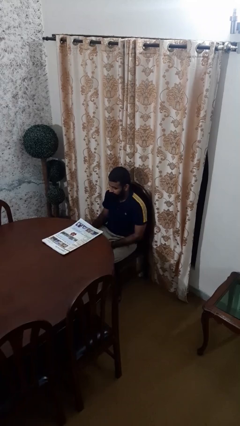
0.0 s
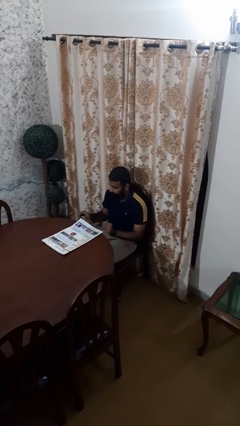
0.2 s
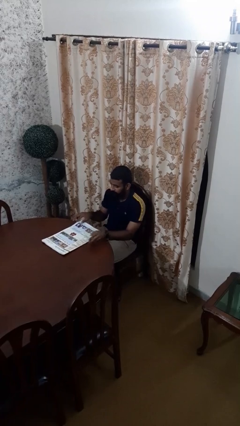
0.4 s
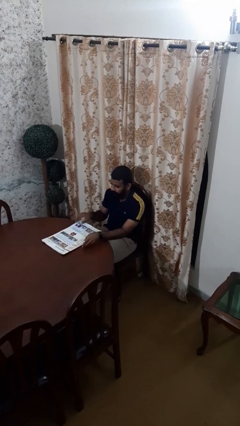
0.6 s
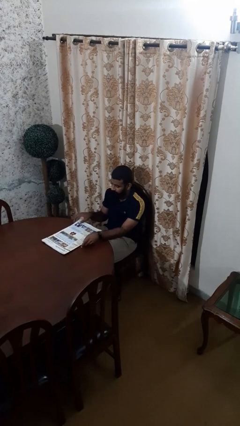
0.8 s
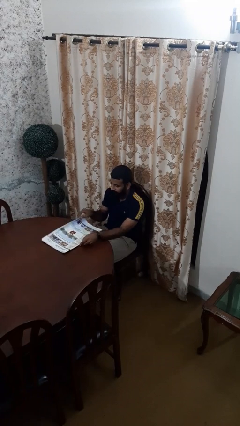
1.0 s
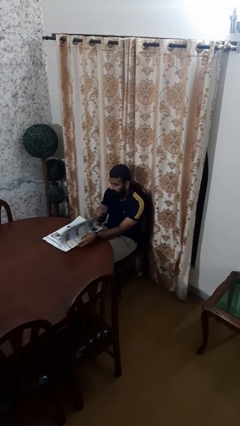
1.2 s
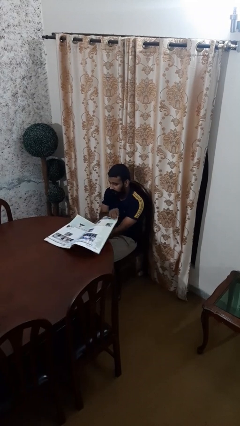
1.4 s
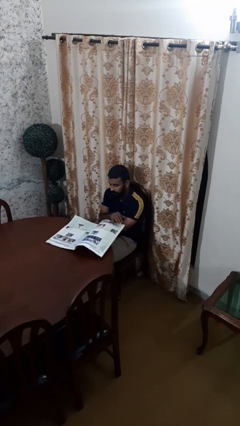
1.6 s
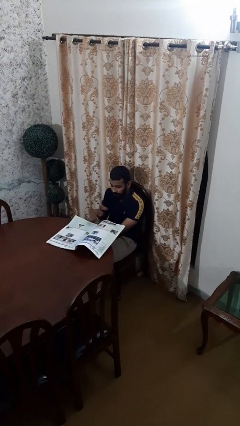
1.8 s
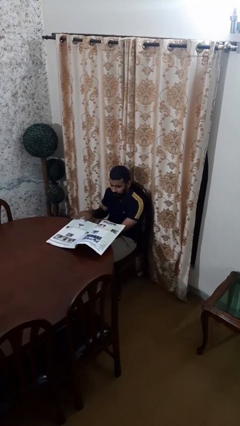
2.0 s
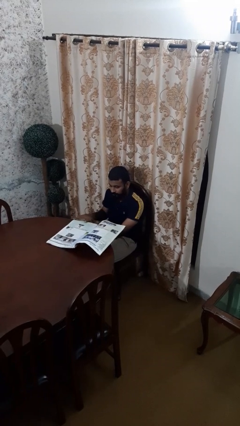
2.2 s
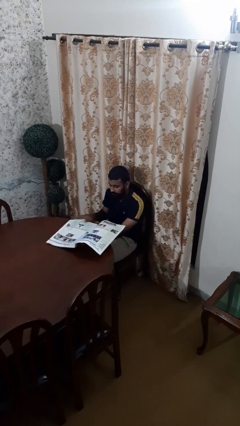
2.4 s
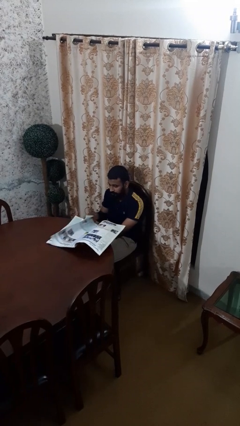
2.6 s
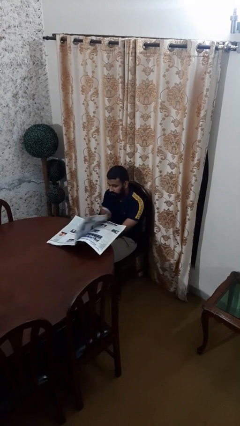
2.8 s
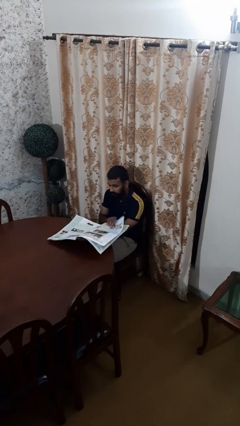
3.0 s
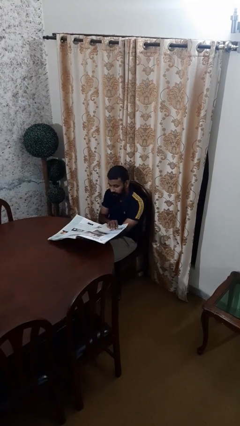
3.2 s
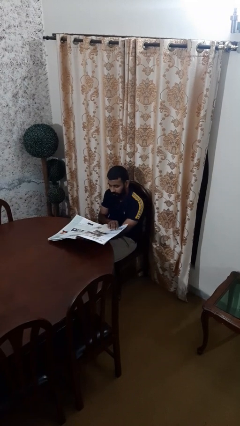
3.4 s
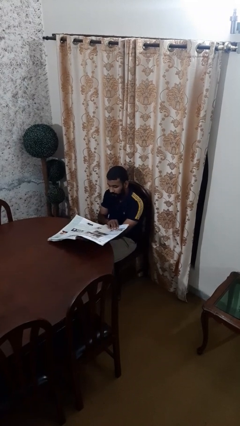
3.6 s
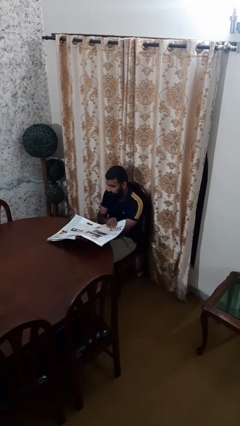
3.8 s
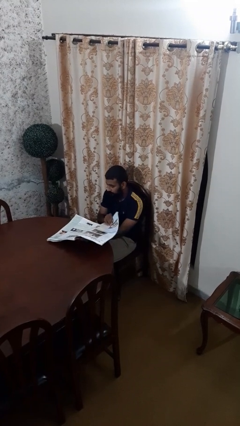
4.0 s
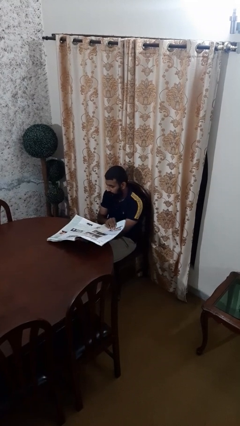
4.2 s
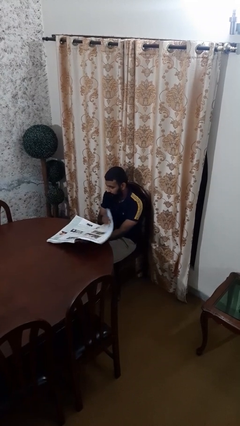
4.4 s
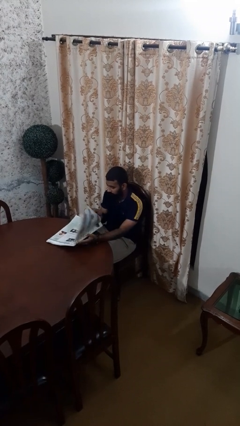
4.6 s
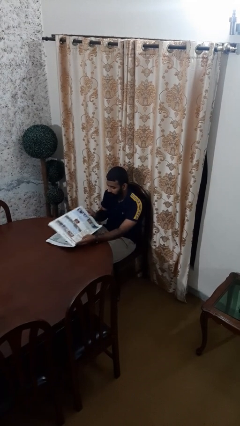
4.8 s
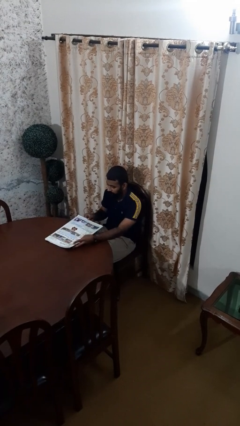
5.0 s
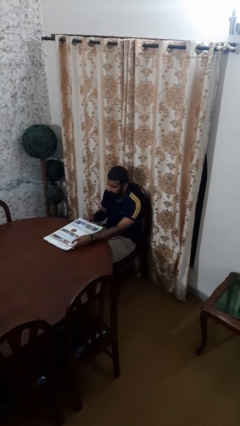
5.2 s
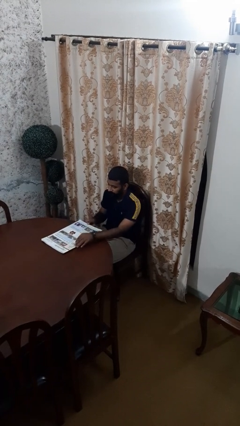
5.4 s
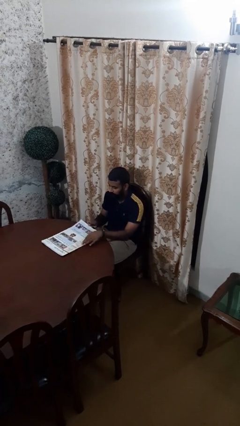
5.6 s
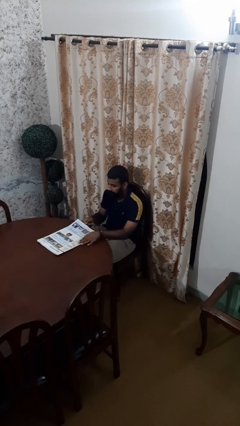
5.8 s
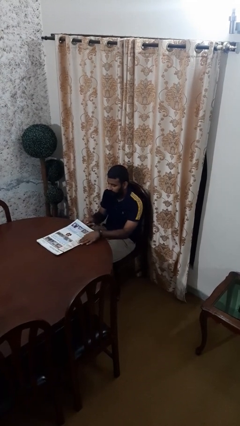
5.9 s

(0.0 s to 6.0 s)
person reads magazine

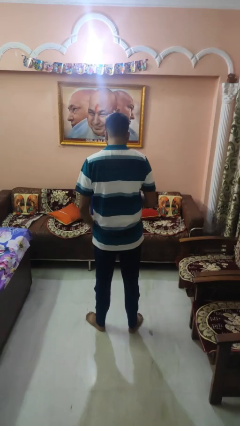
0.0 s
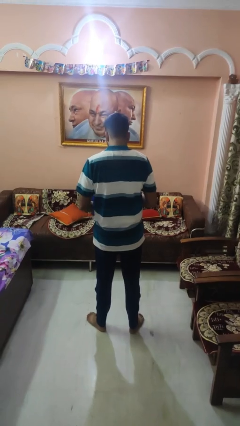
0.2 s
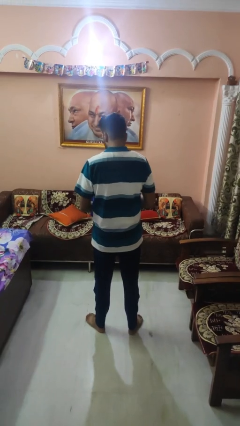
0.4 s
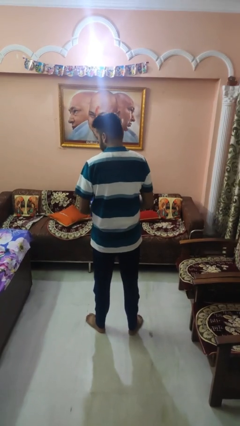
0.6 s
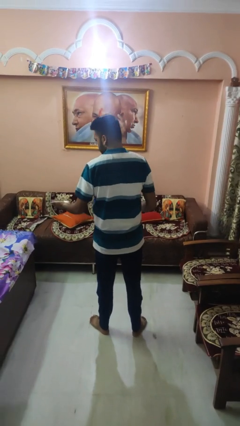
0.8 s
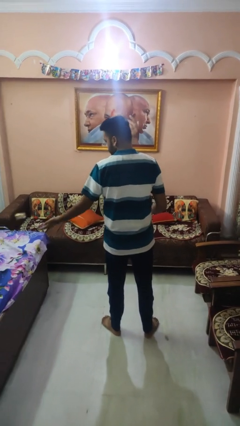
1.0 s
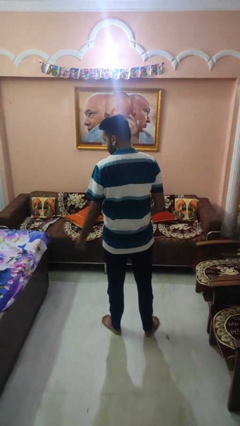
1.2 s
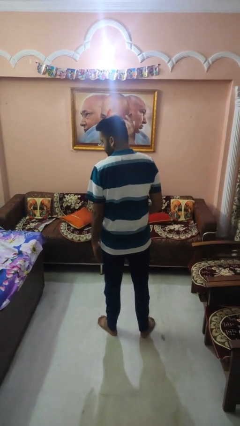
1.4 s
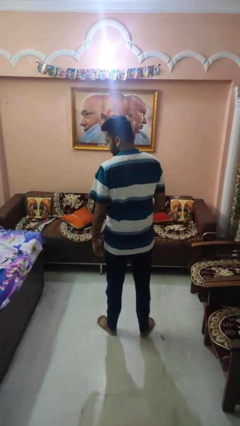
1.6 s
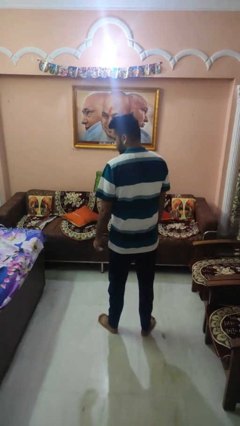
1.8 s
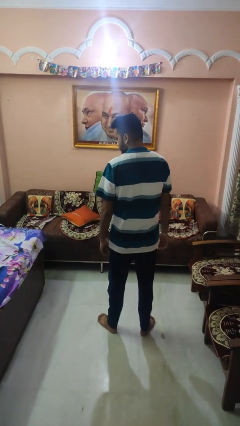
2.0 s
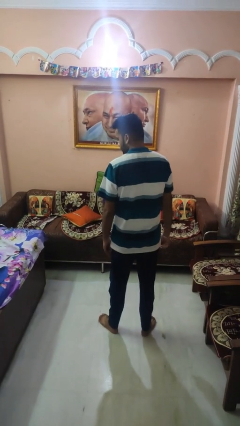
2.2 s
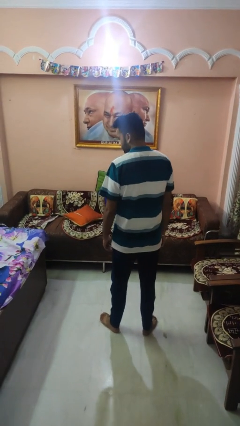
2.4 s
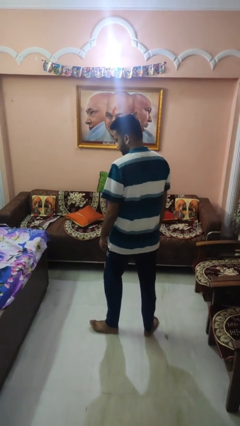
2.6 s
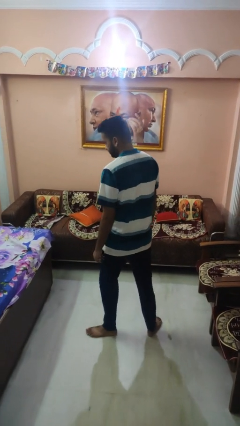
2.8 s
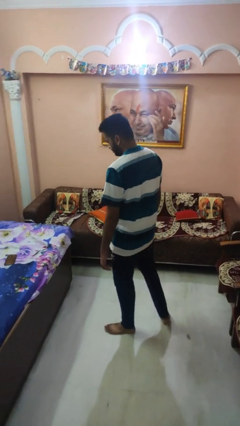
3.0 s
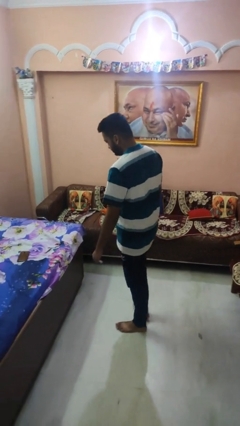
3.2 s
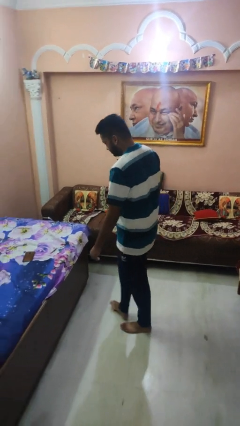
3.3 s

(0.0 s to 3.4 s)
person throws object on bed

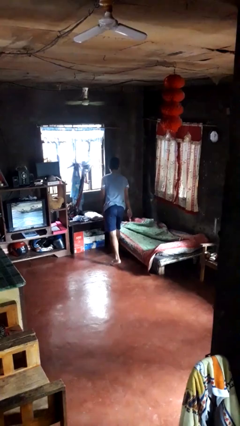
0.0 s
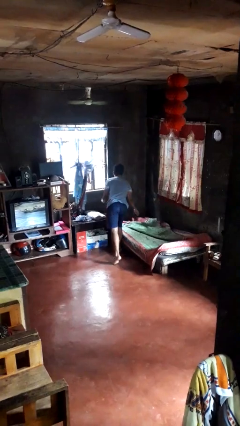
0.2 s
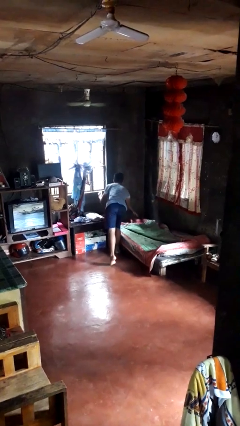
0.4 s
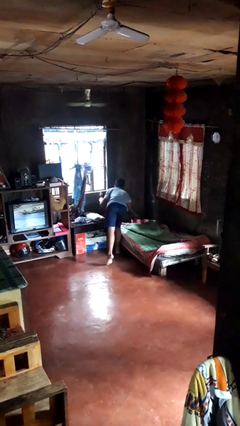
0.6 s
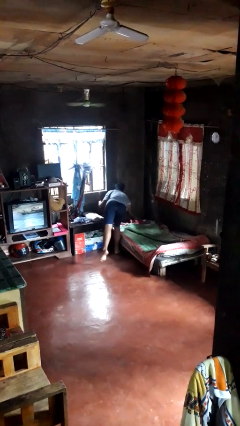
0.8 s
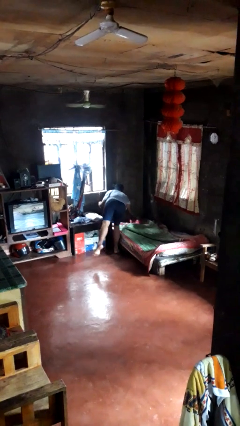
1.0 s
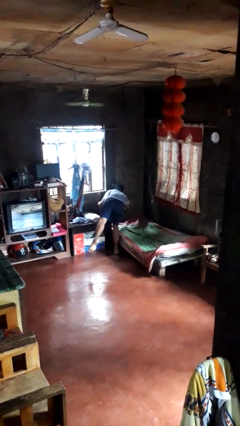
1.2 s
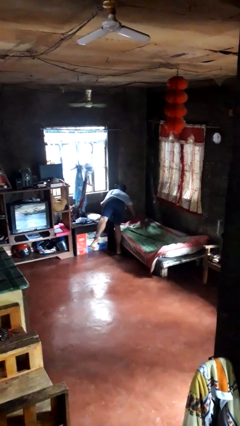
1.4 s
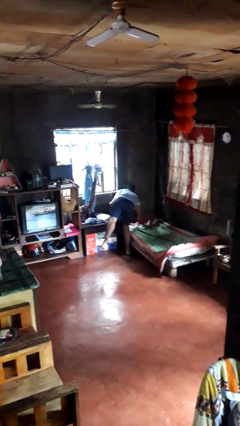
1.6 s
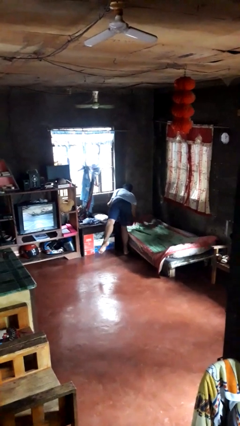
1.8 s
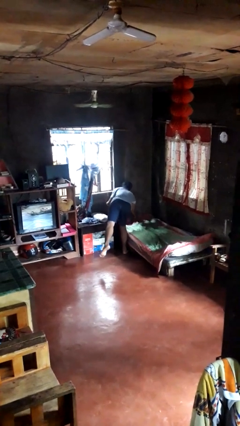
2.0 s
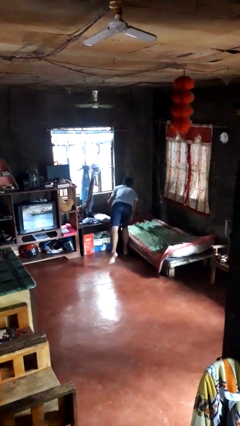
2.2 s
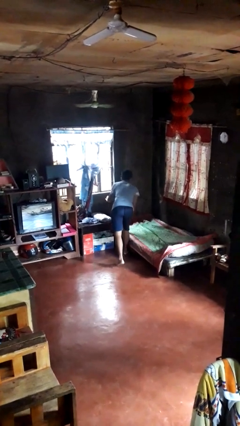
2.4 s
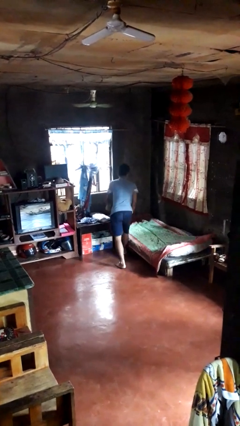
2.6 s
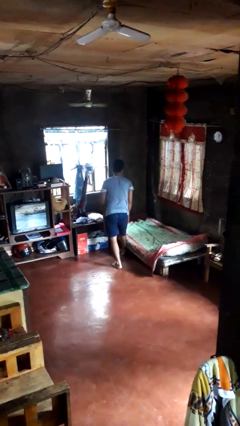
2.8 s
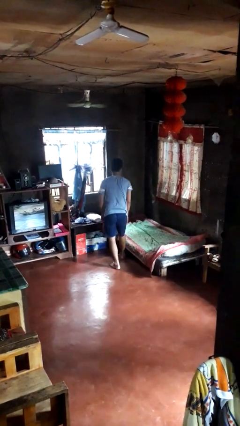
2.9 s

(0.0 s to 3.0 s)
person makes bed

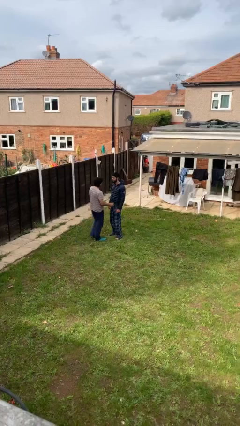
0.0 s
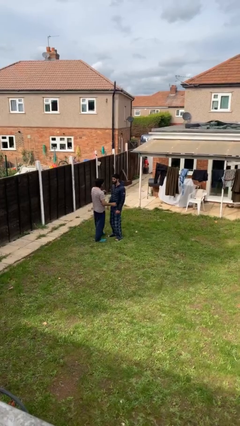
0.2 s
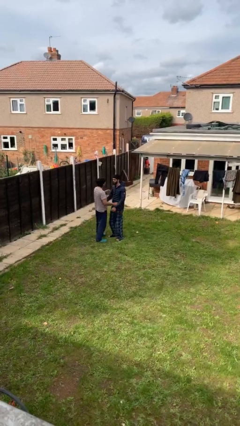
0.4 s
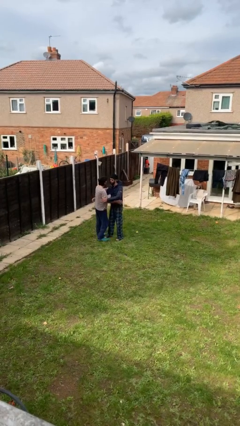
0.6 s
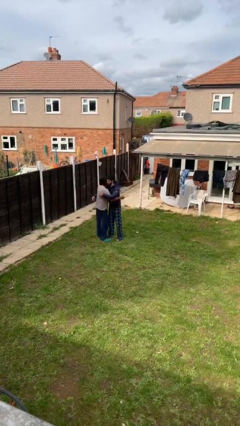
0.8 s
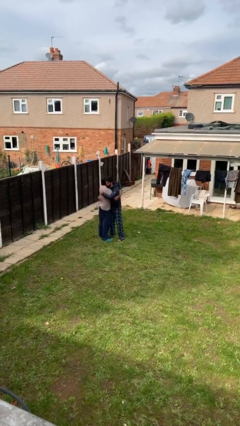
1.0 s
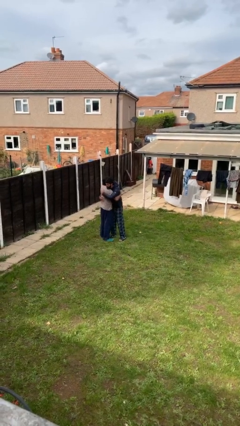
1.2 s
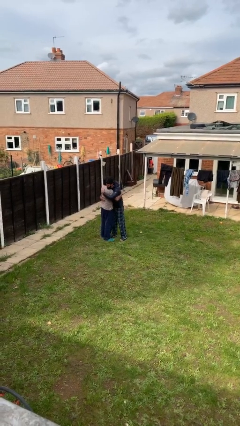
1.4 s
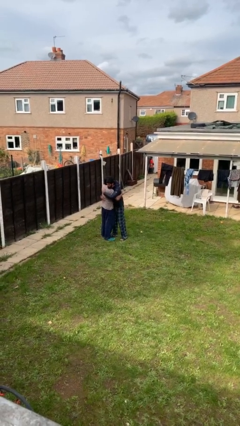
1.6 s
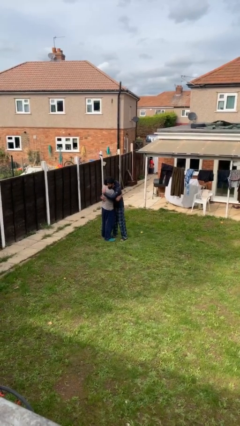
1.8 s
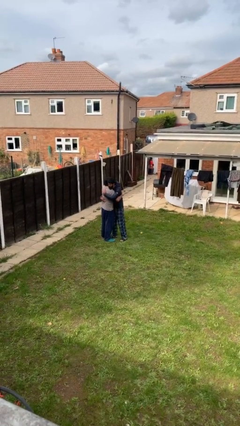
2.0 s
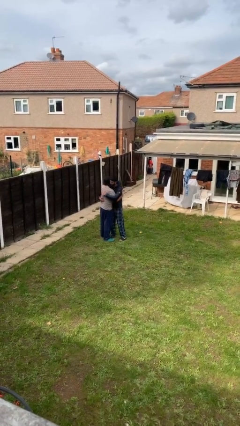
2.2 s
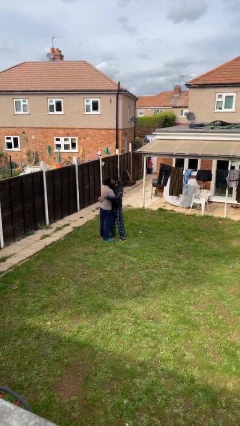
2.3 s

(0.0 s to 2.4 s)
person embraces person

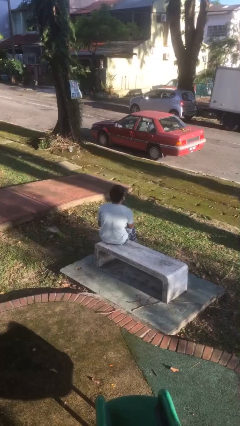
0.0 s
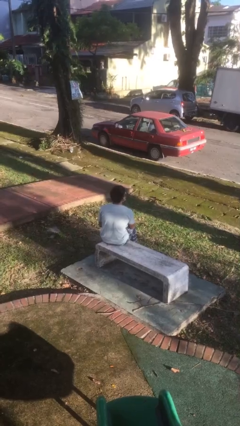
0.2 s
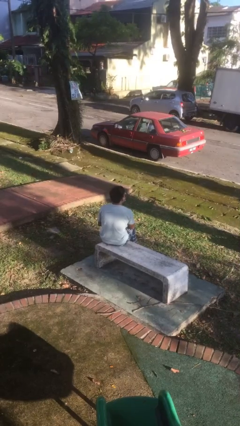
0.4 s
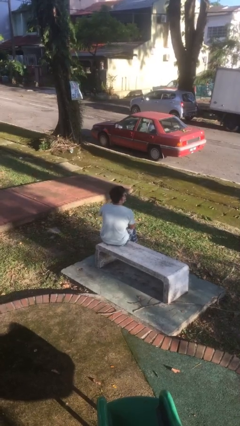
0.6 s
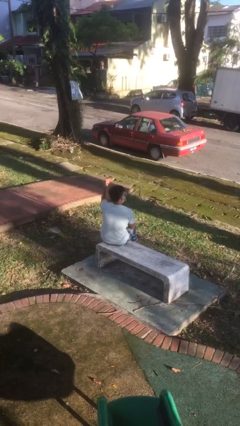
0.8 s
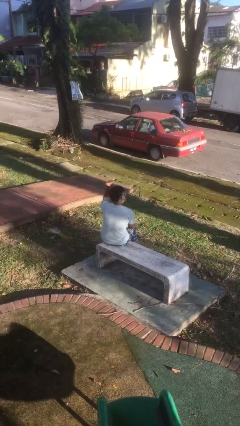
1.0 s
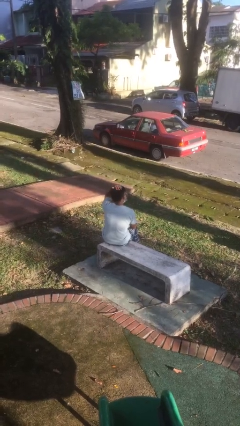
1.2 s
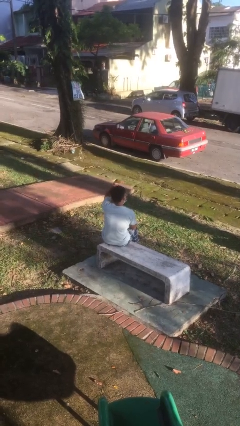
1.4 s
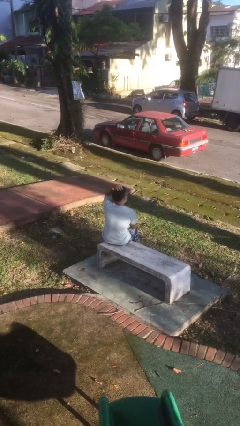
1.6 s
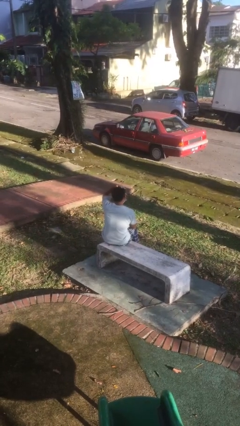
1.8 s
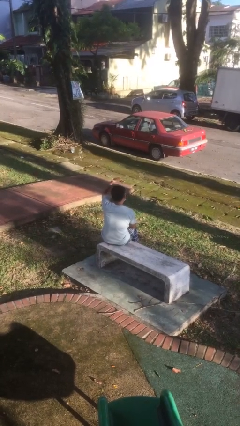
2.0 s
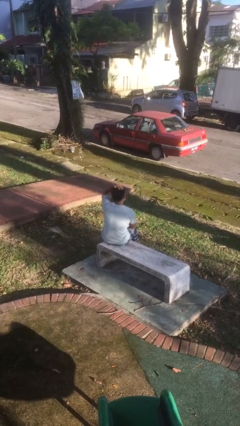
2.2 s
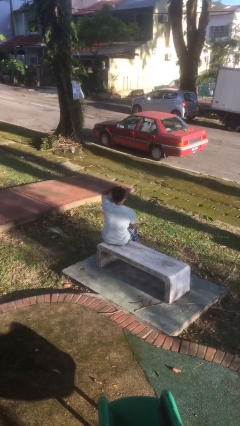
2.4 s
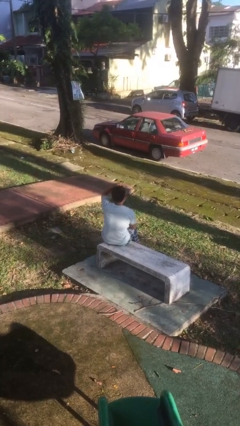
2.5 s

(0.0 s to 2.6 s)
person pats head
